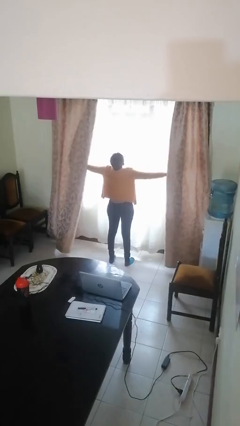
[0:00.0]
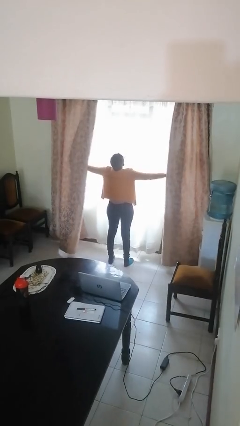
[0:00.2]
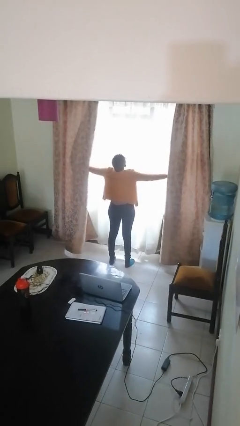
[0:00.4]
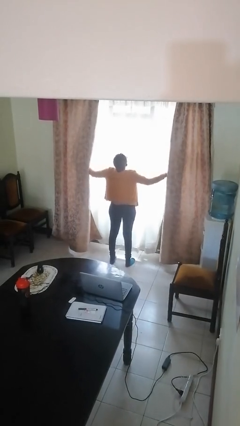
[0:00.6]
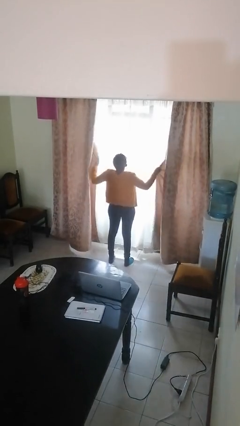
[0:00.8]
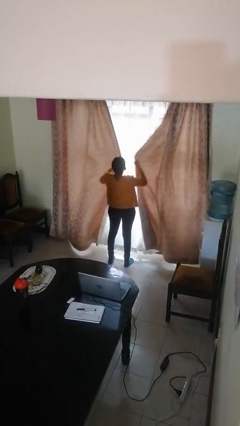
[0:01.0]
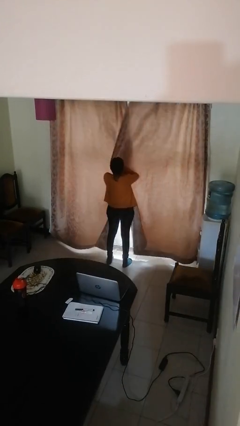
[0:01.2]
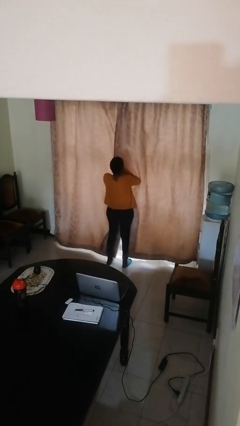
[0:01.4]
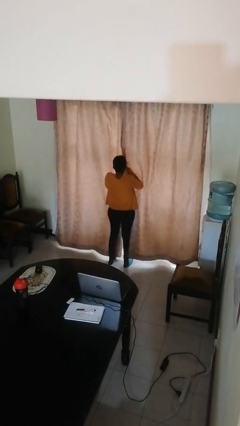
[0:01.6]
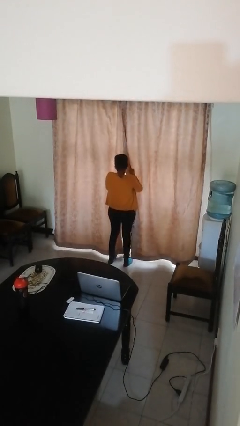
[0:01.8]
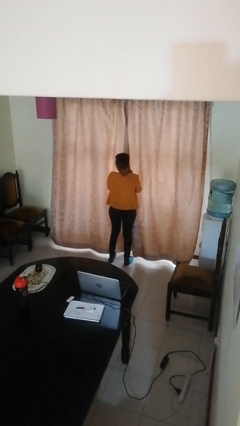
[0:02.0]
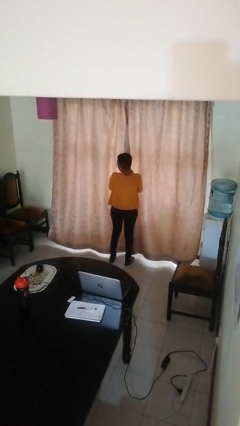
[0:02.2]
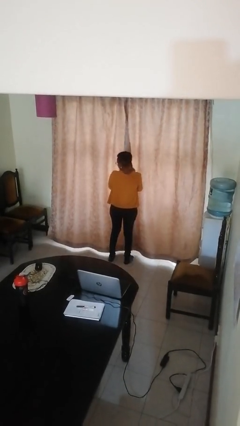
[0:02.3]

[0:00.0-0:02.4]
person closes curtains

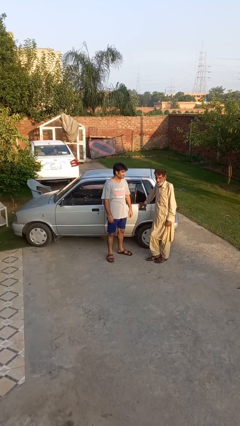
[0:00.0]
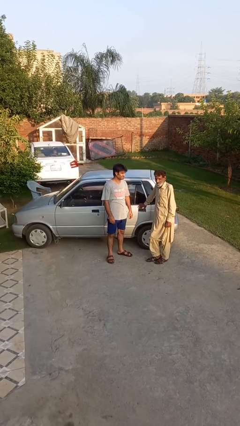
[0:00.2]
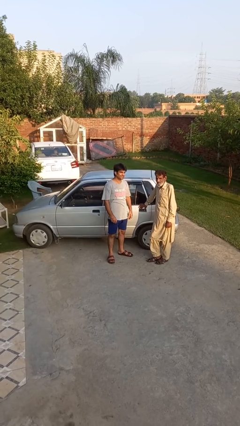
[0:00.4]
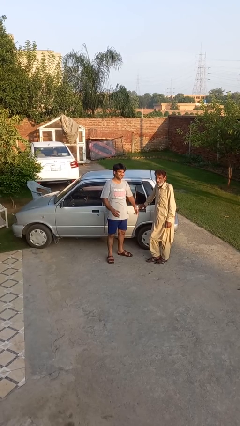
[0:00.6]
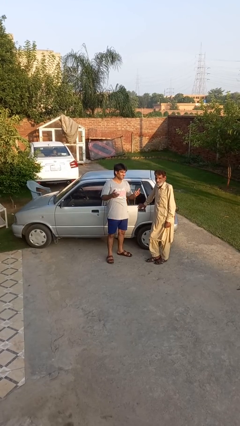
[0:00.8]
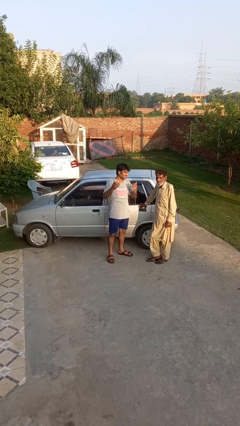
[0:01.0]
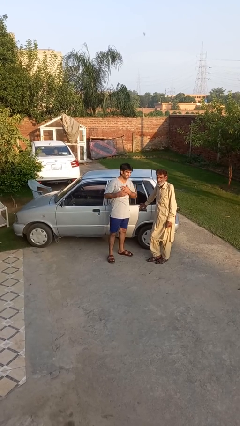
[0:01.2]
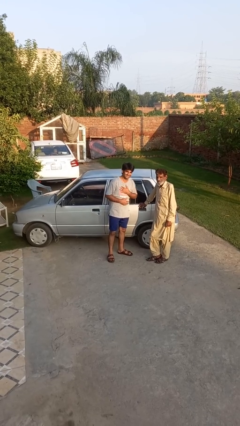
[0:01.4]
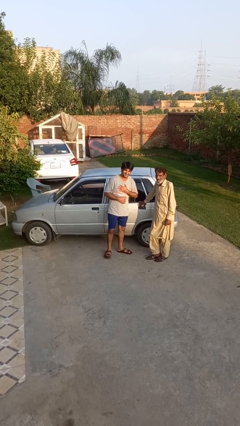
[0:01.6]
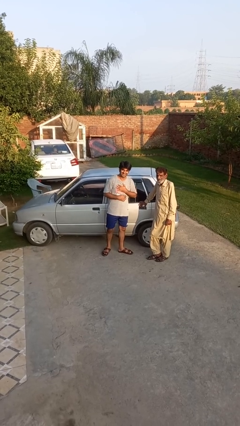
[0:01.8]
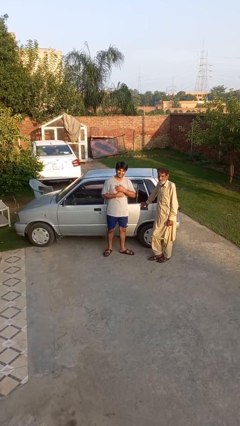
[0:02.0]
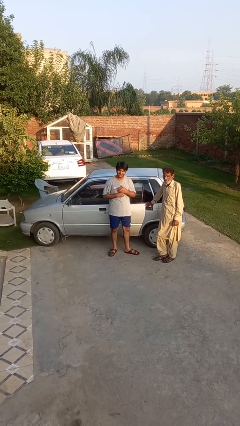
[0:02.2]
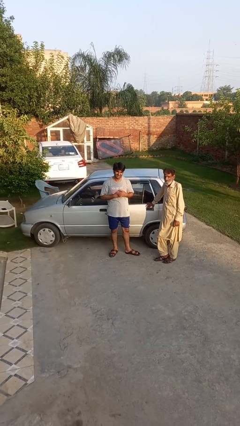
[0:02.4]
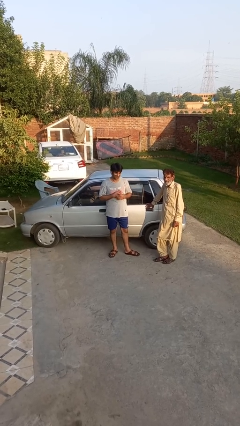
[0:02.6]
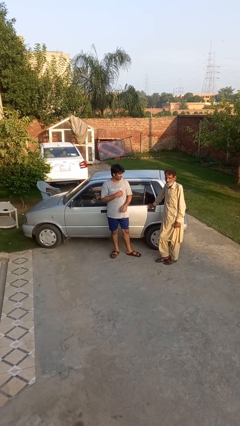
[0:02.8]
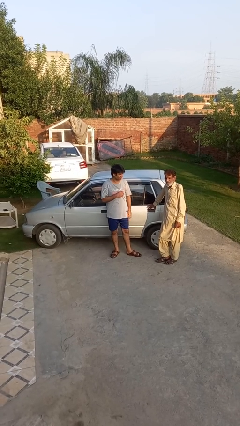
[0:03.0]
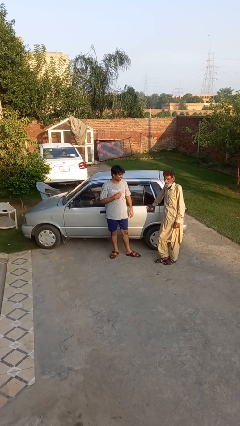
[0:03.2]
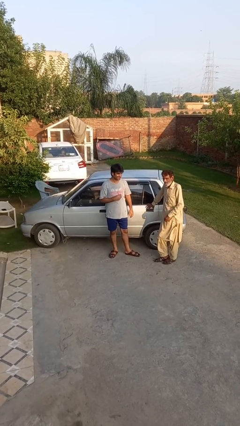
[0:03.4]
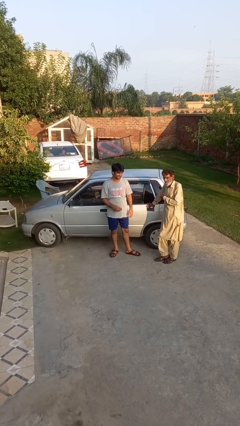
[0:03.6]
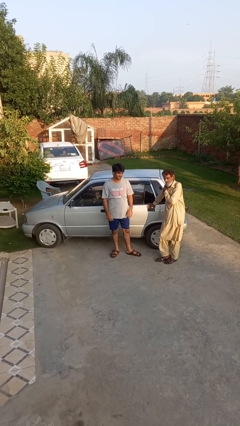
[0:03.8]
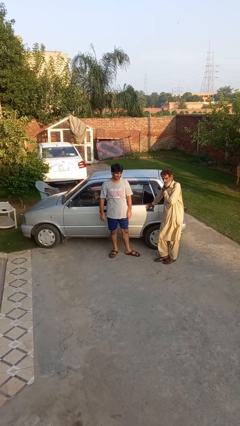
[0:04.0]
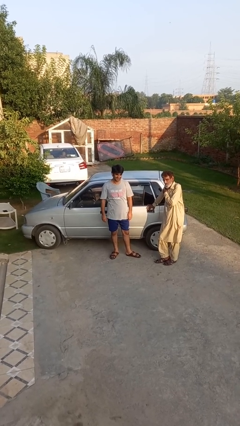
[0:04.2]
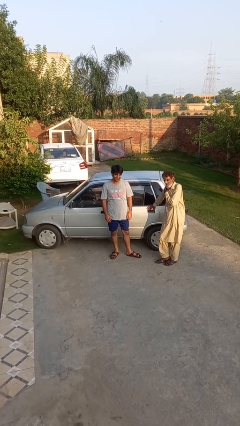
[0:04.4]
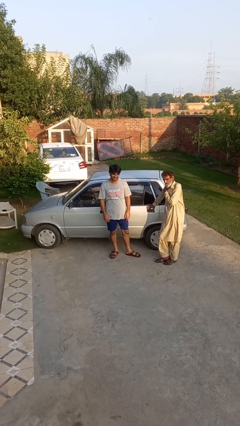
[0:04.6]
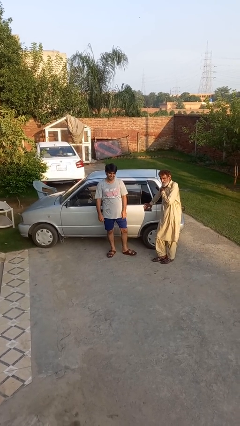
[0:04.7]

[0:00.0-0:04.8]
person laughs with person

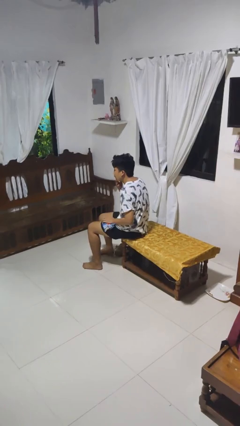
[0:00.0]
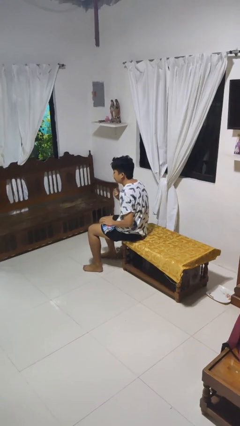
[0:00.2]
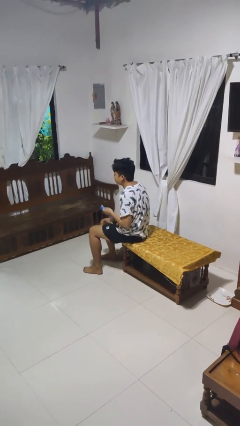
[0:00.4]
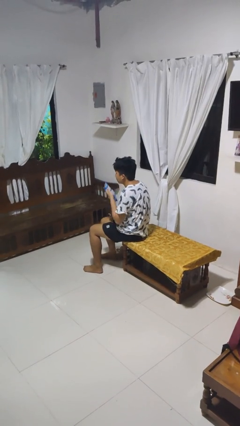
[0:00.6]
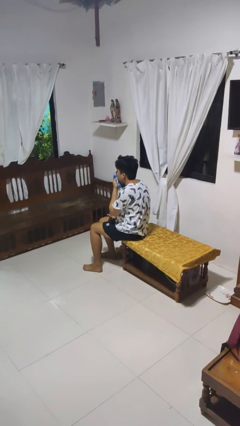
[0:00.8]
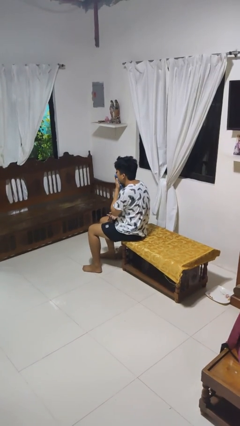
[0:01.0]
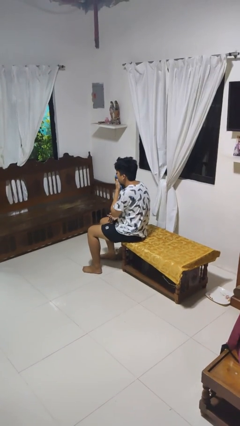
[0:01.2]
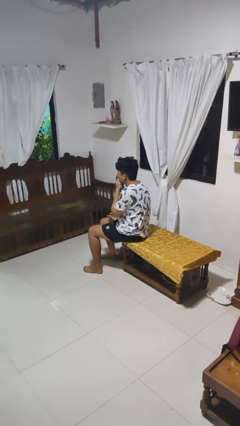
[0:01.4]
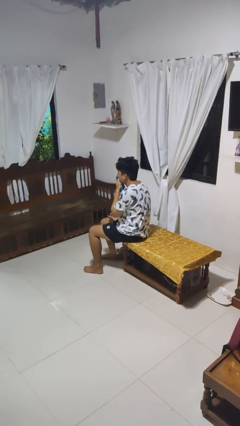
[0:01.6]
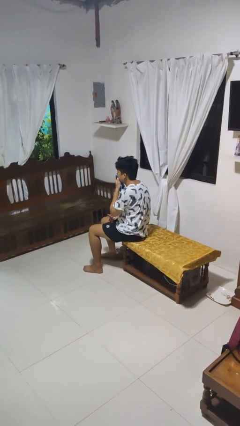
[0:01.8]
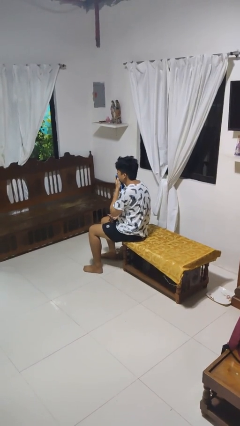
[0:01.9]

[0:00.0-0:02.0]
person blows nose

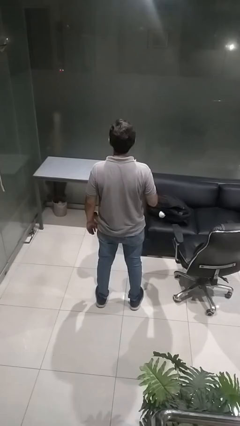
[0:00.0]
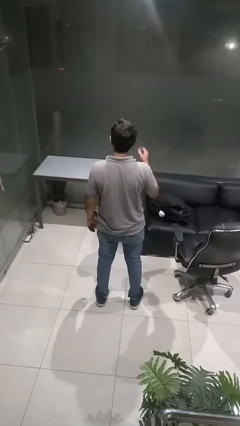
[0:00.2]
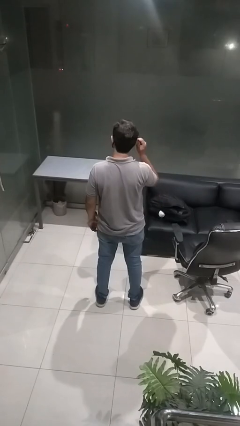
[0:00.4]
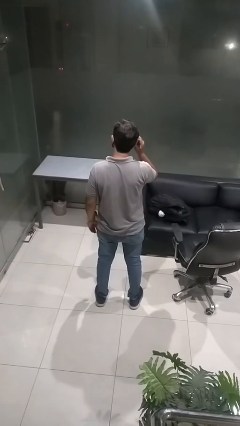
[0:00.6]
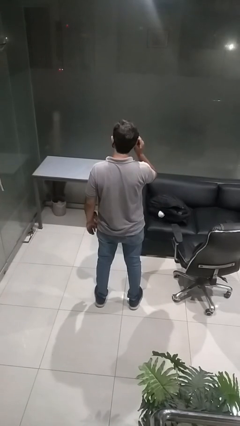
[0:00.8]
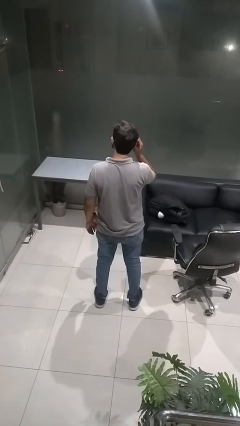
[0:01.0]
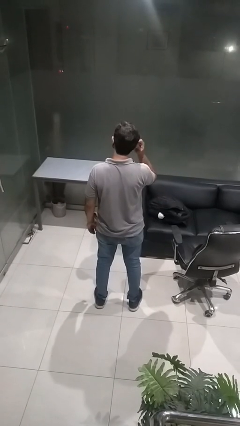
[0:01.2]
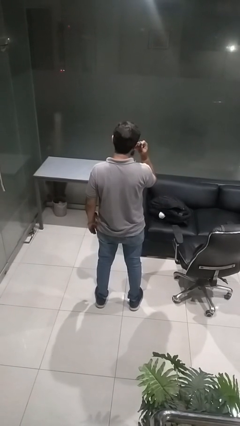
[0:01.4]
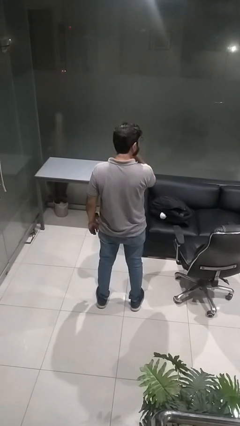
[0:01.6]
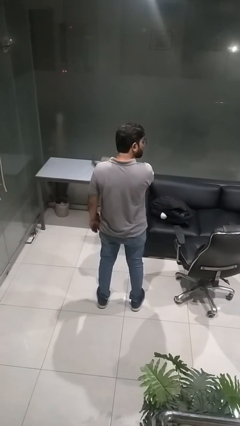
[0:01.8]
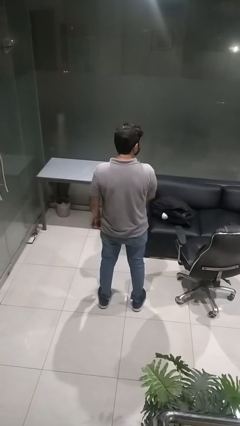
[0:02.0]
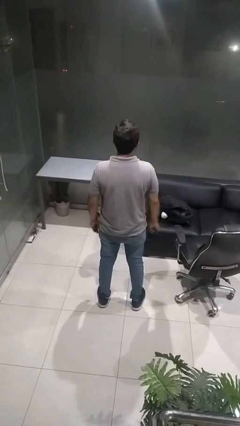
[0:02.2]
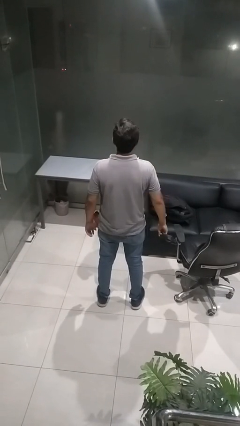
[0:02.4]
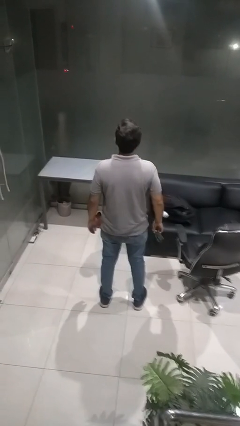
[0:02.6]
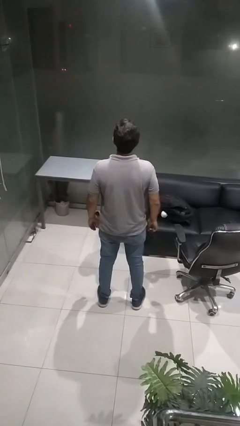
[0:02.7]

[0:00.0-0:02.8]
person takes off facemask

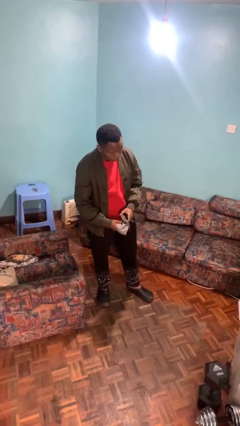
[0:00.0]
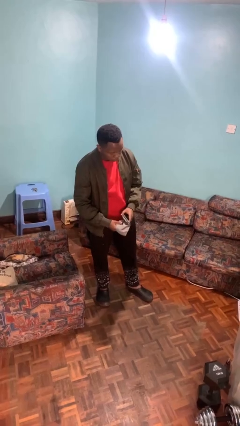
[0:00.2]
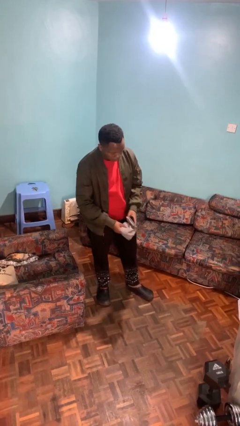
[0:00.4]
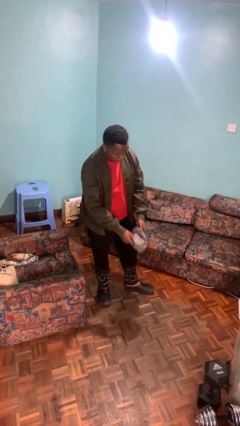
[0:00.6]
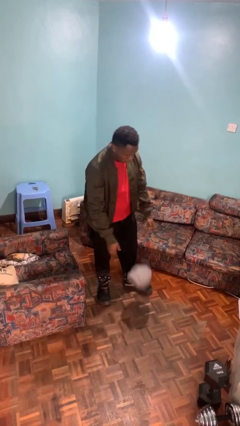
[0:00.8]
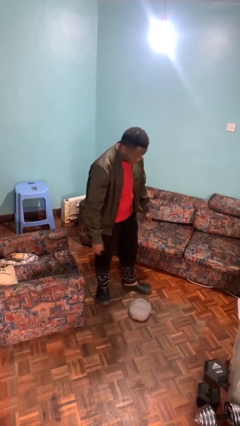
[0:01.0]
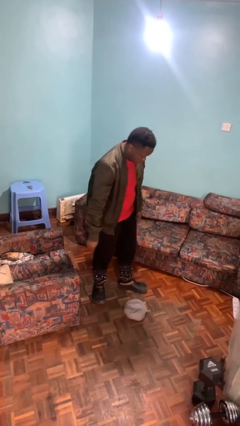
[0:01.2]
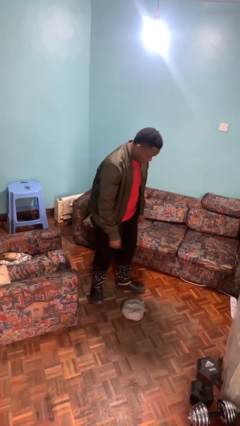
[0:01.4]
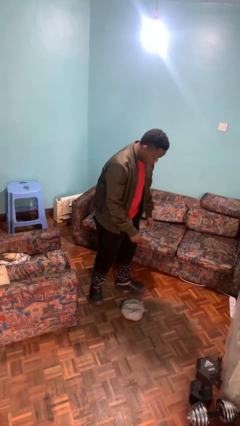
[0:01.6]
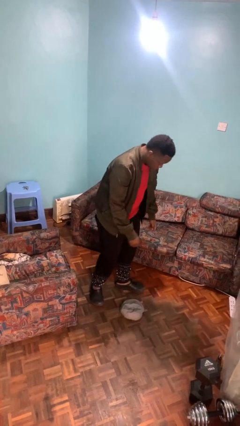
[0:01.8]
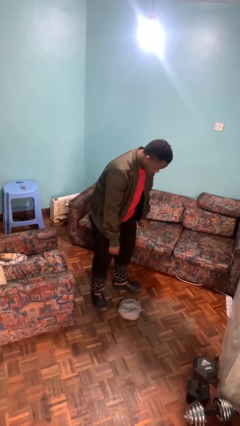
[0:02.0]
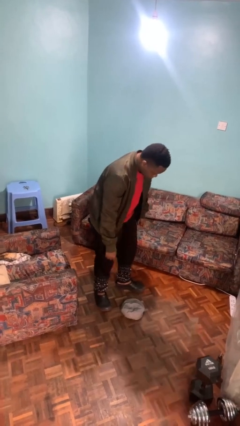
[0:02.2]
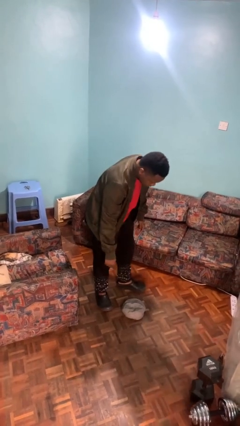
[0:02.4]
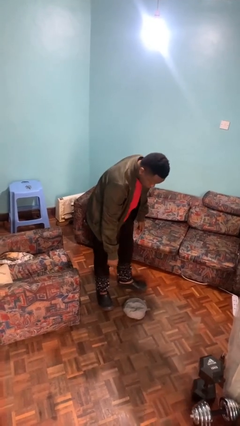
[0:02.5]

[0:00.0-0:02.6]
person drops object

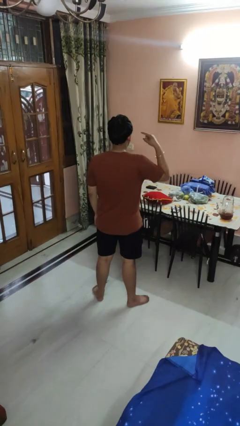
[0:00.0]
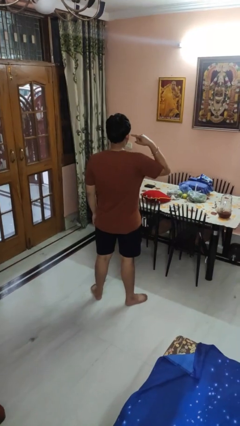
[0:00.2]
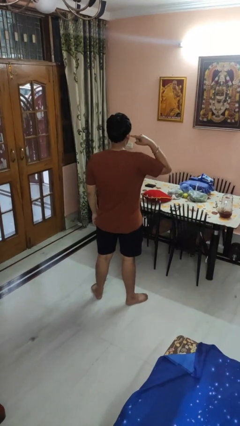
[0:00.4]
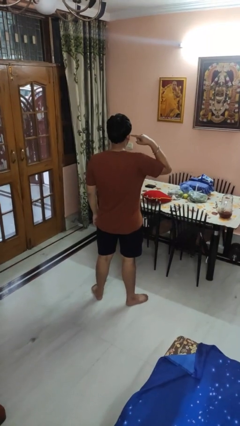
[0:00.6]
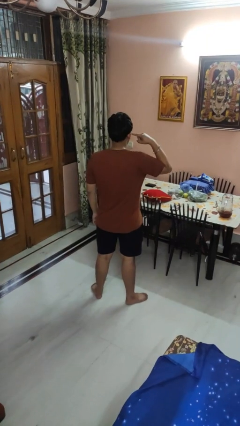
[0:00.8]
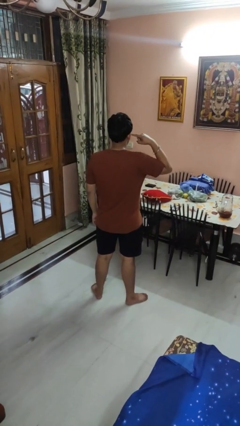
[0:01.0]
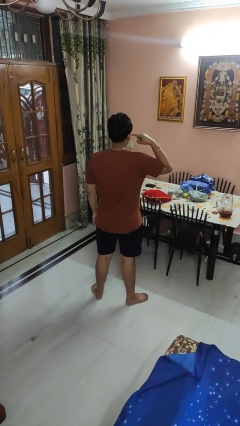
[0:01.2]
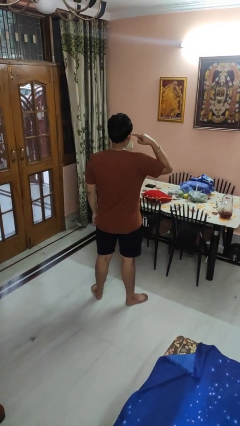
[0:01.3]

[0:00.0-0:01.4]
person gestures listen closely

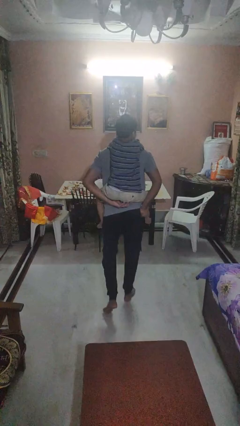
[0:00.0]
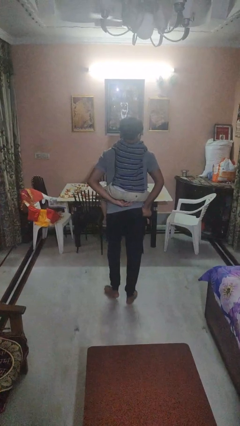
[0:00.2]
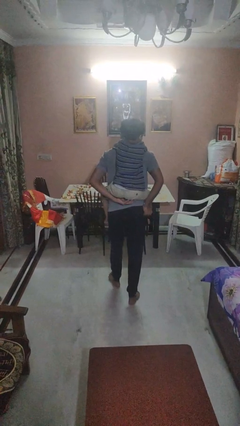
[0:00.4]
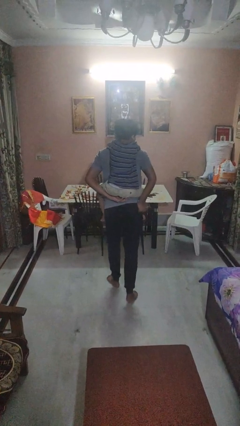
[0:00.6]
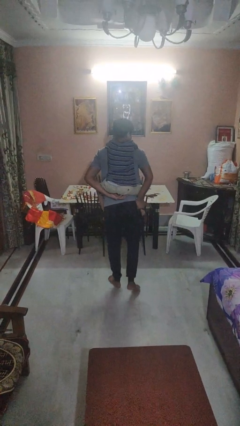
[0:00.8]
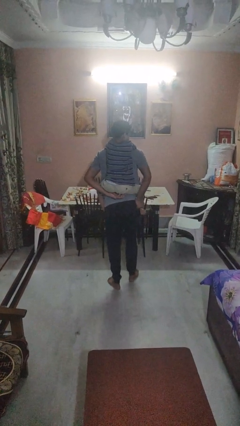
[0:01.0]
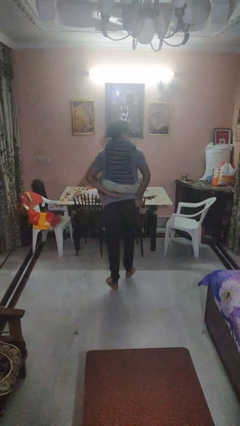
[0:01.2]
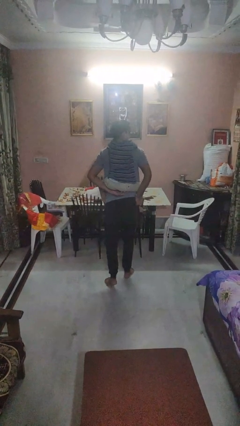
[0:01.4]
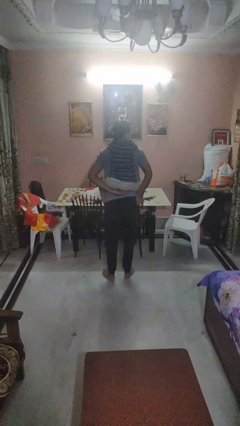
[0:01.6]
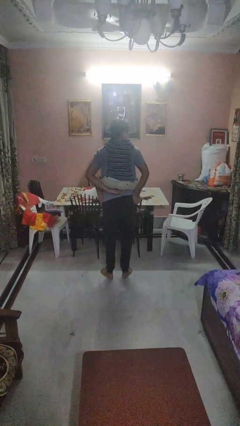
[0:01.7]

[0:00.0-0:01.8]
person carries person on back
